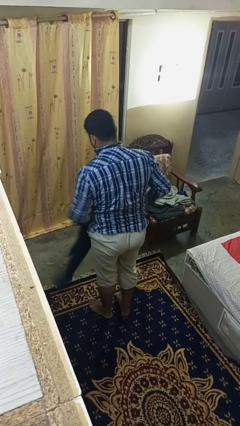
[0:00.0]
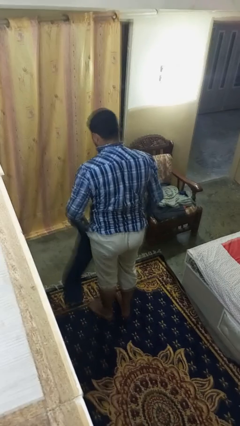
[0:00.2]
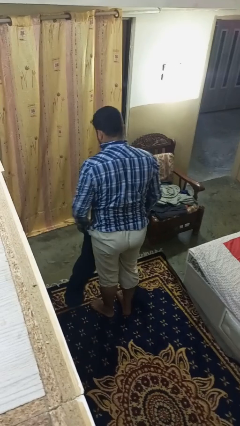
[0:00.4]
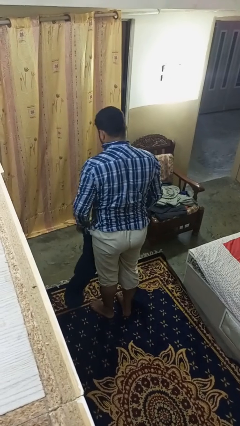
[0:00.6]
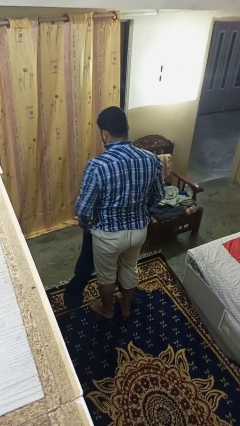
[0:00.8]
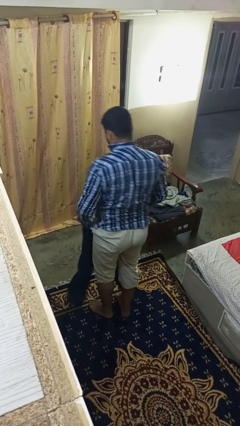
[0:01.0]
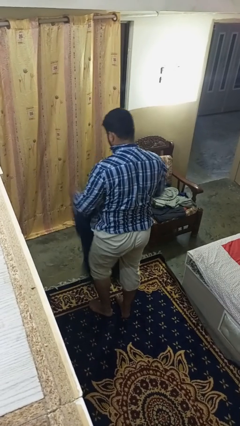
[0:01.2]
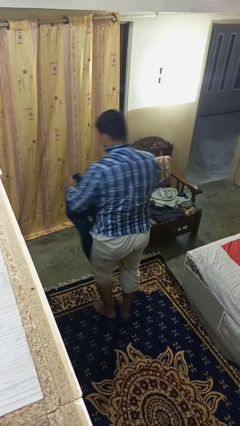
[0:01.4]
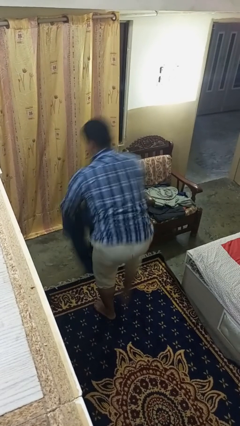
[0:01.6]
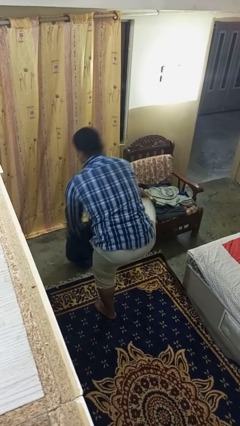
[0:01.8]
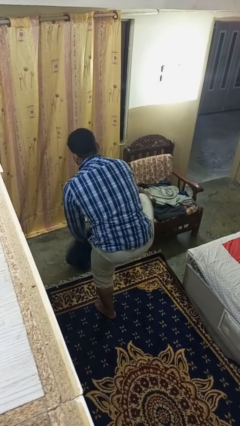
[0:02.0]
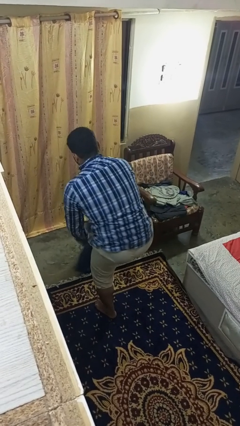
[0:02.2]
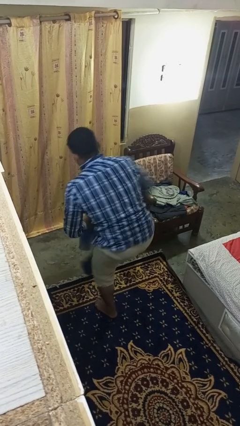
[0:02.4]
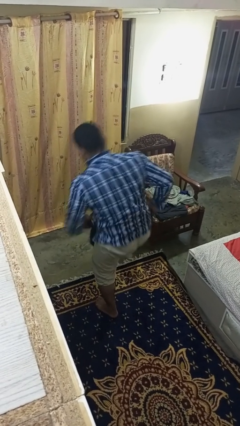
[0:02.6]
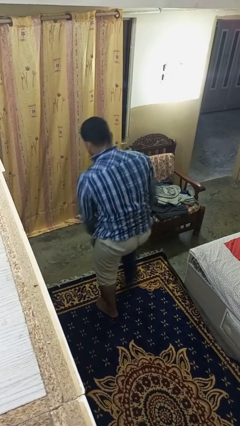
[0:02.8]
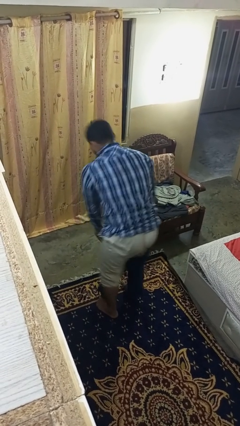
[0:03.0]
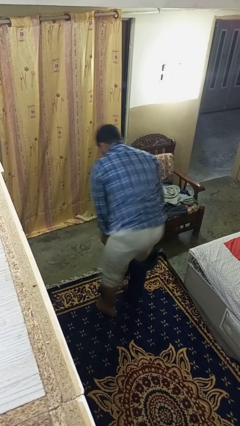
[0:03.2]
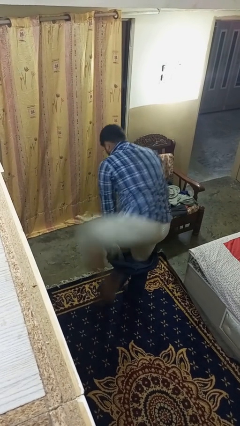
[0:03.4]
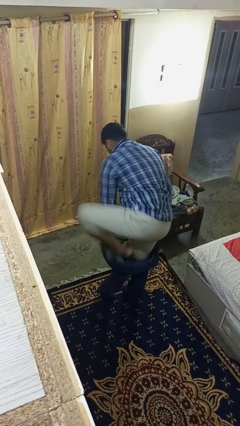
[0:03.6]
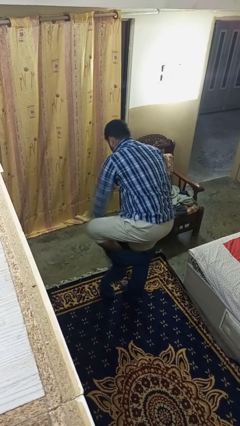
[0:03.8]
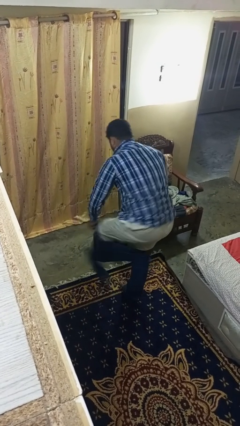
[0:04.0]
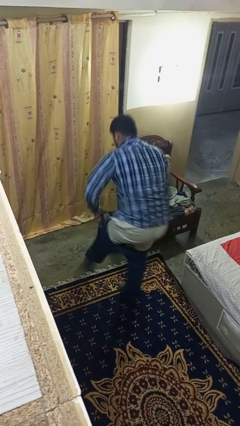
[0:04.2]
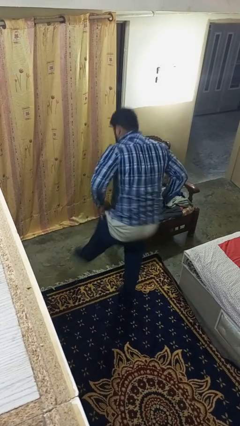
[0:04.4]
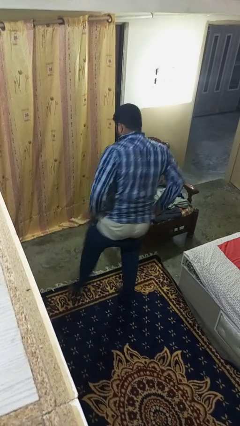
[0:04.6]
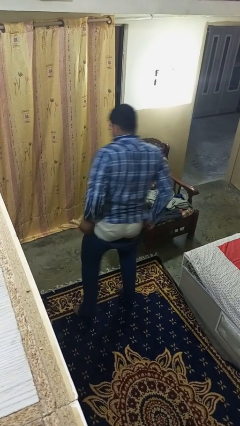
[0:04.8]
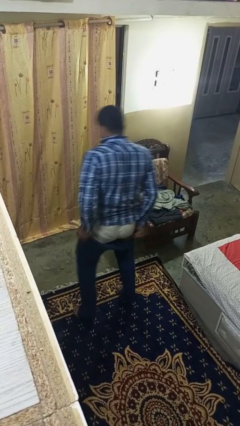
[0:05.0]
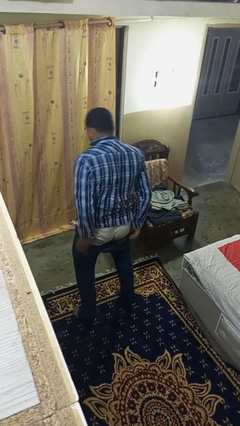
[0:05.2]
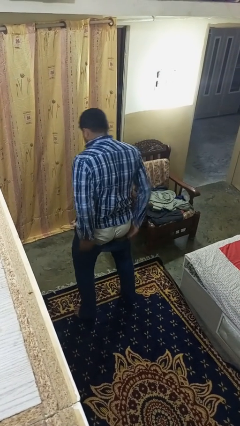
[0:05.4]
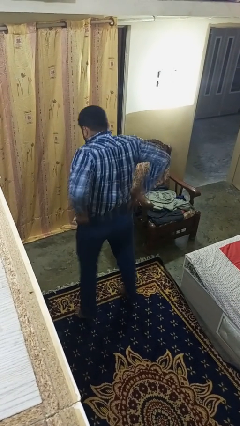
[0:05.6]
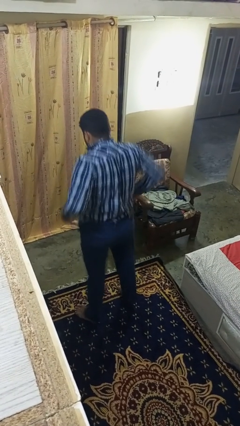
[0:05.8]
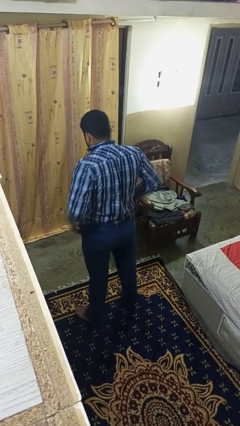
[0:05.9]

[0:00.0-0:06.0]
person puts on pants

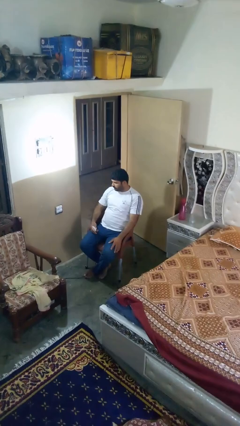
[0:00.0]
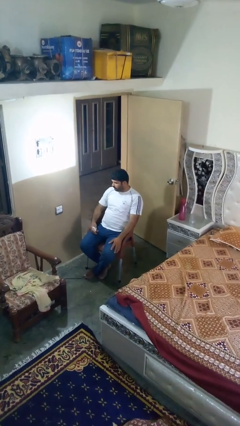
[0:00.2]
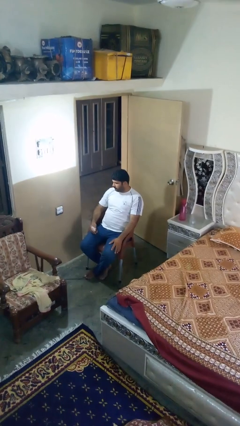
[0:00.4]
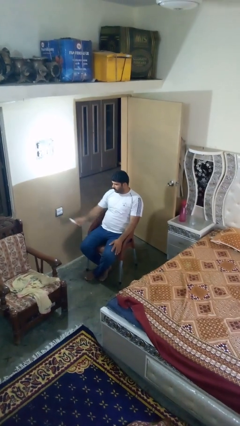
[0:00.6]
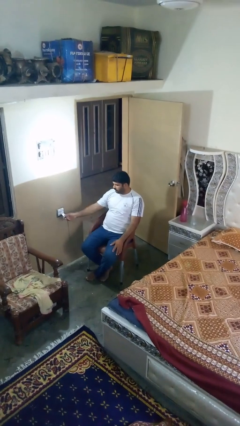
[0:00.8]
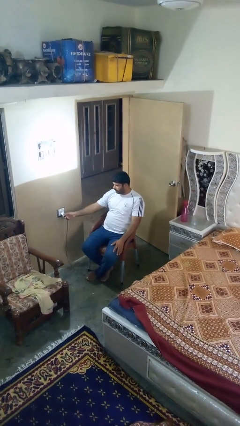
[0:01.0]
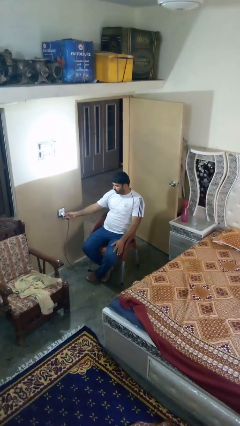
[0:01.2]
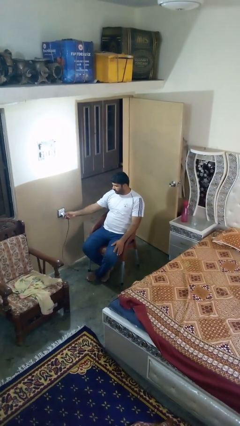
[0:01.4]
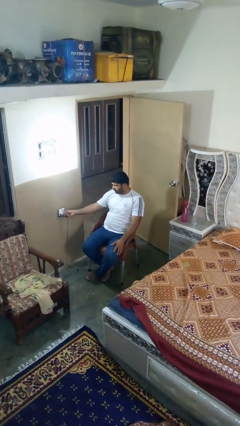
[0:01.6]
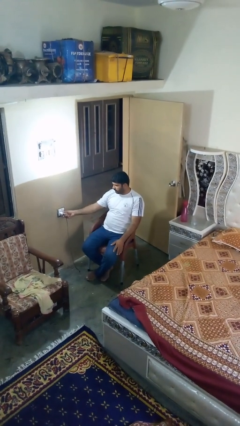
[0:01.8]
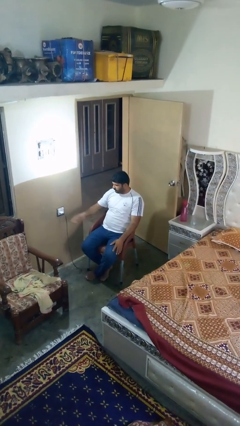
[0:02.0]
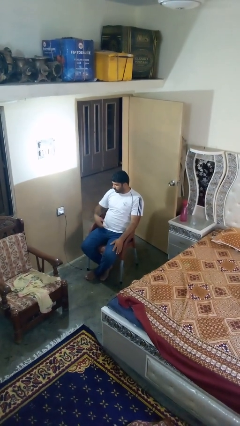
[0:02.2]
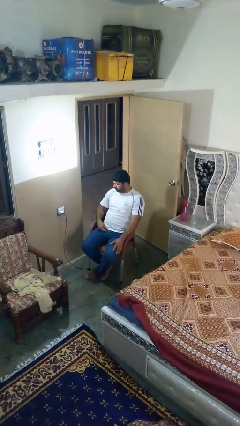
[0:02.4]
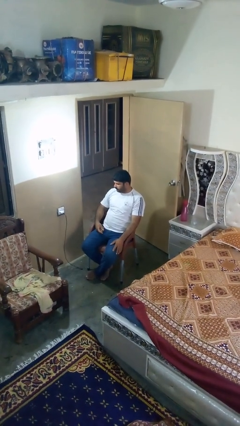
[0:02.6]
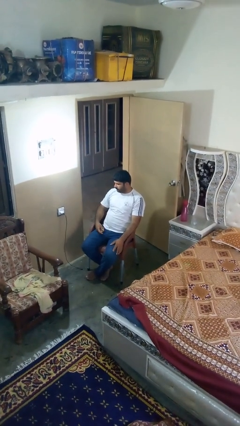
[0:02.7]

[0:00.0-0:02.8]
person plugs into electrical socket

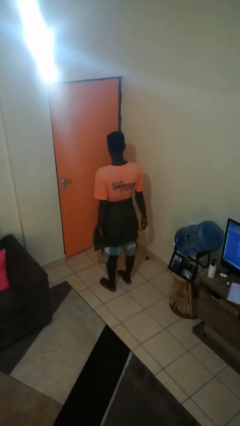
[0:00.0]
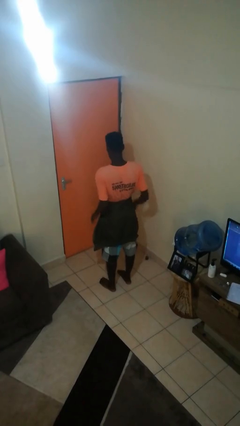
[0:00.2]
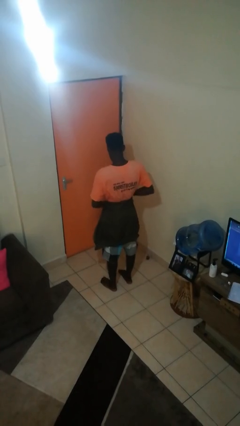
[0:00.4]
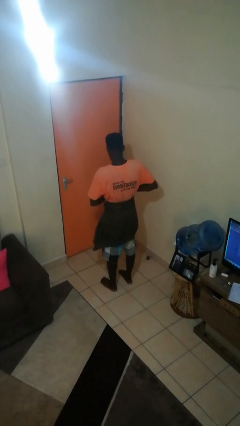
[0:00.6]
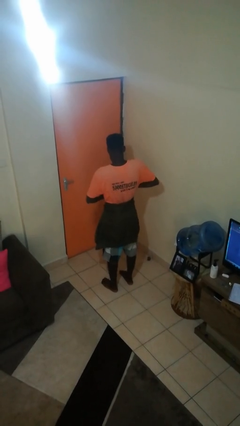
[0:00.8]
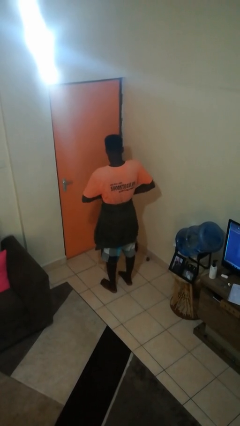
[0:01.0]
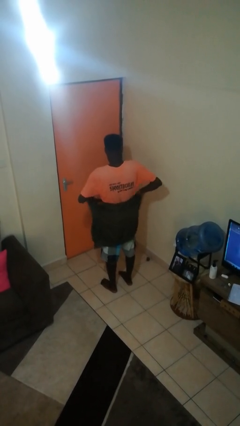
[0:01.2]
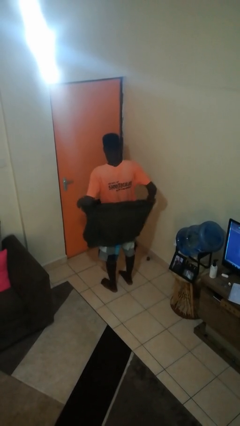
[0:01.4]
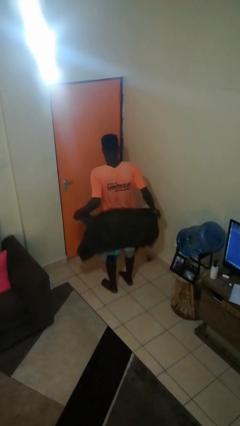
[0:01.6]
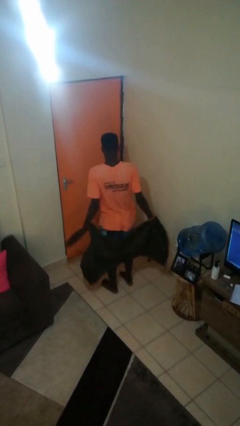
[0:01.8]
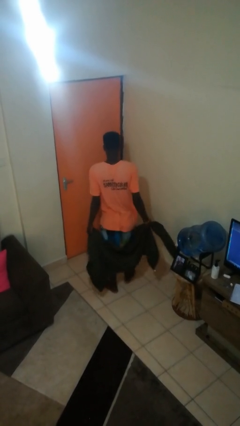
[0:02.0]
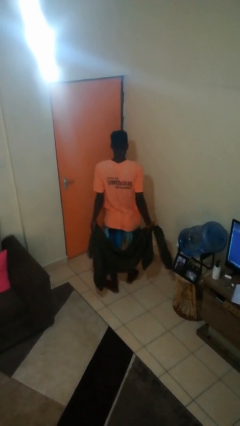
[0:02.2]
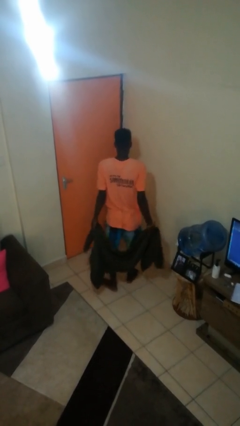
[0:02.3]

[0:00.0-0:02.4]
person unties jacket around waist

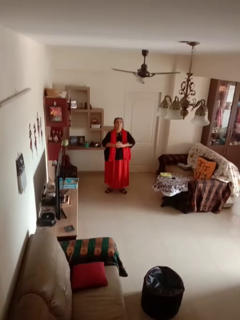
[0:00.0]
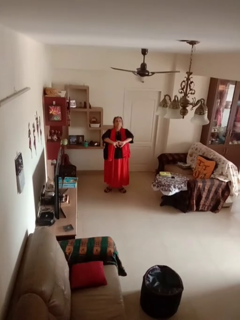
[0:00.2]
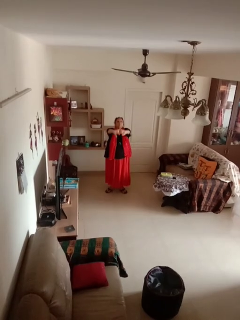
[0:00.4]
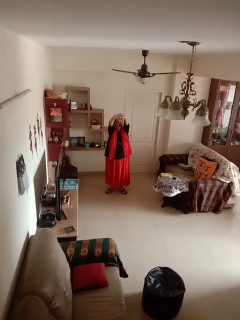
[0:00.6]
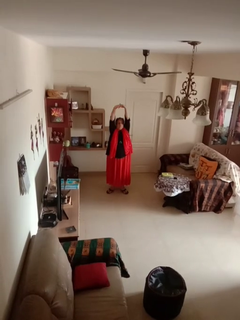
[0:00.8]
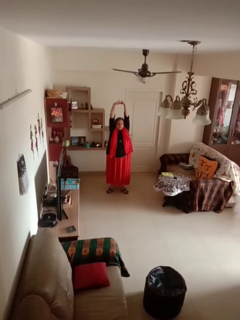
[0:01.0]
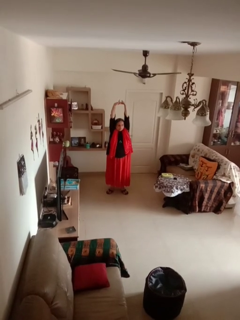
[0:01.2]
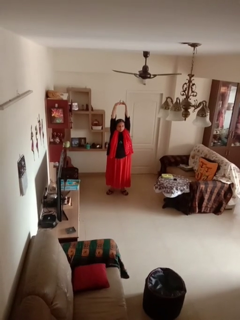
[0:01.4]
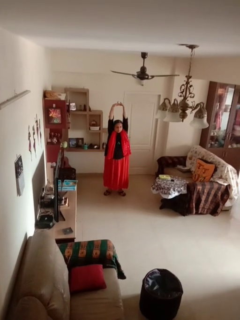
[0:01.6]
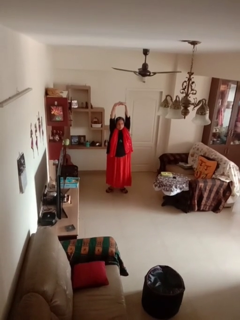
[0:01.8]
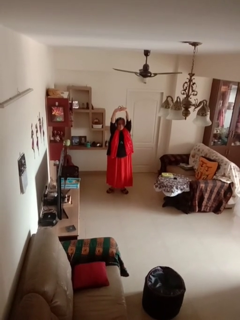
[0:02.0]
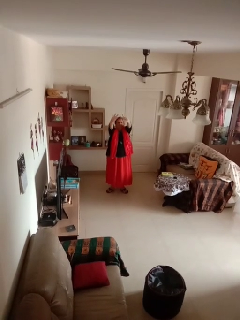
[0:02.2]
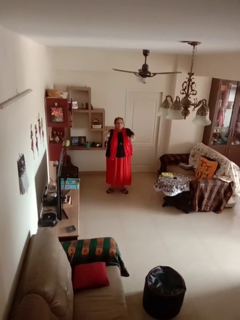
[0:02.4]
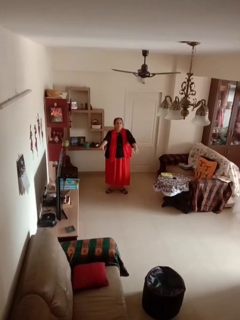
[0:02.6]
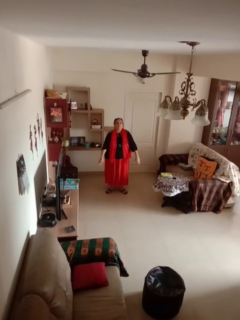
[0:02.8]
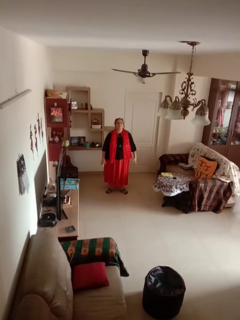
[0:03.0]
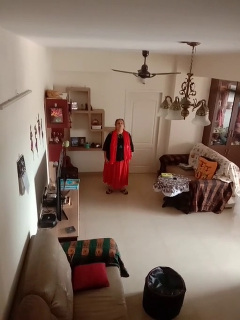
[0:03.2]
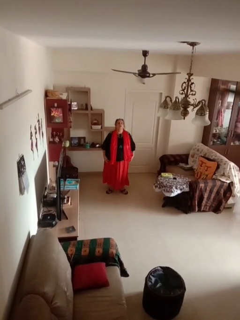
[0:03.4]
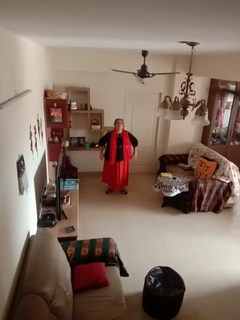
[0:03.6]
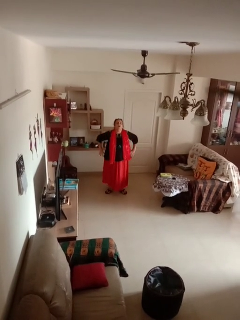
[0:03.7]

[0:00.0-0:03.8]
person stretches arms over head

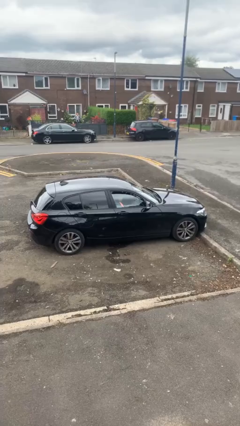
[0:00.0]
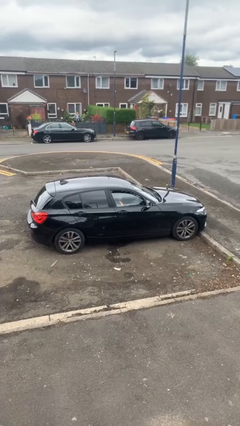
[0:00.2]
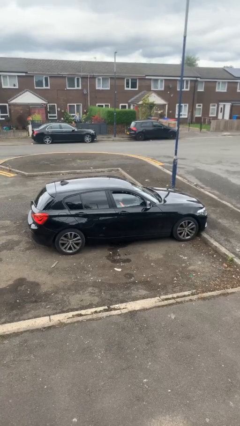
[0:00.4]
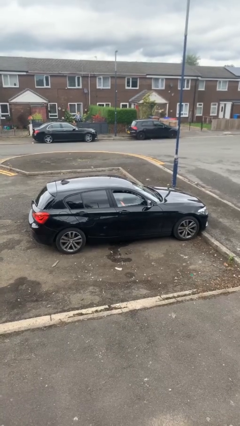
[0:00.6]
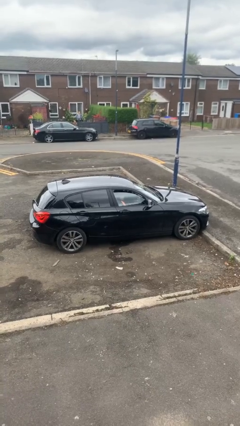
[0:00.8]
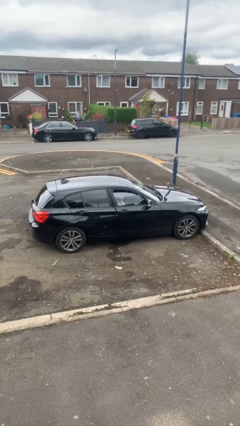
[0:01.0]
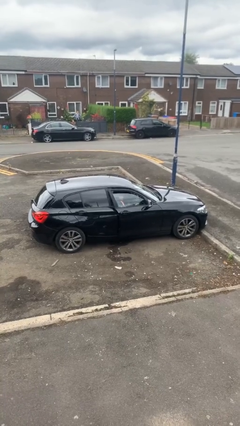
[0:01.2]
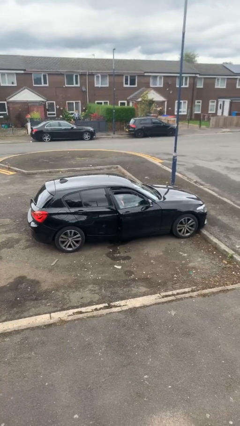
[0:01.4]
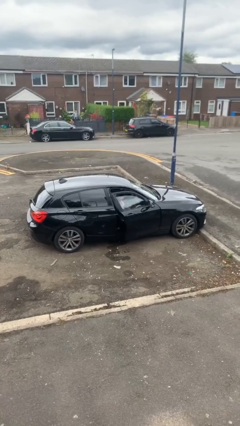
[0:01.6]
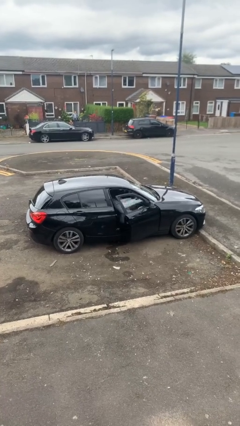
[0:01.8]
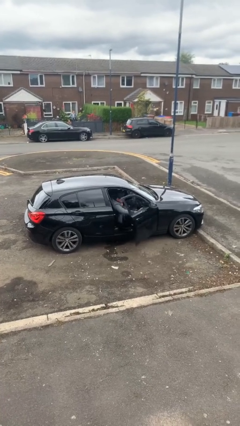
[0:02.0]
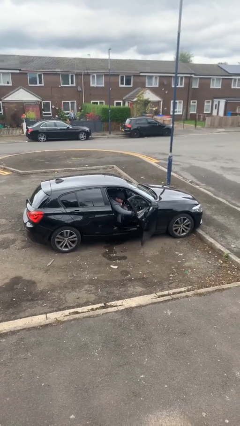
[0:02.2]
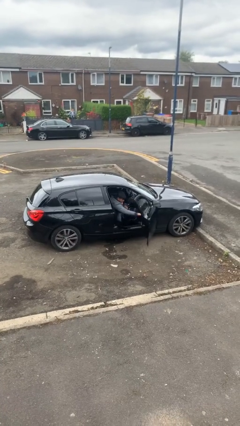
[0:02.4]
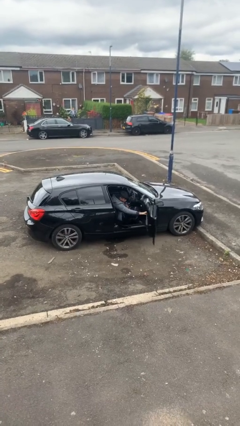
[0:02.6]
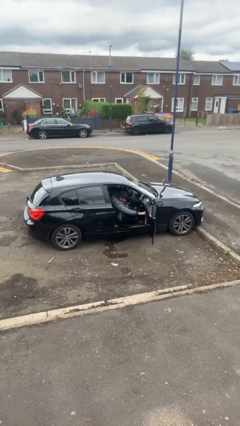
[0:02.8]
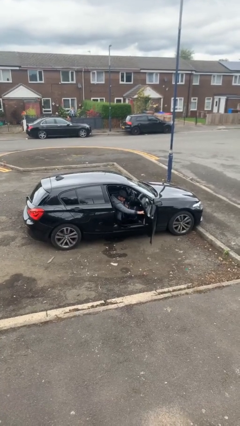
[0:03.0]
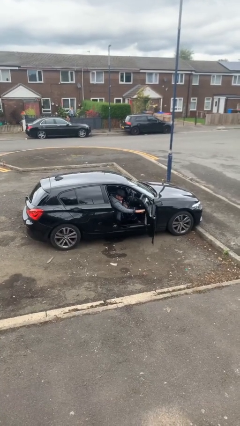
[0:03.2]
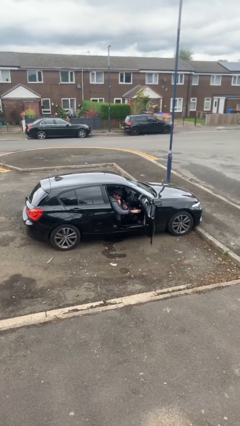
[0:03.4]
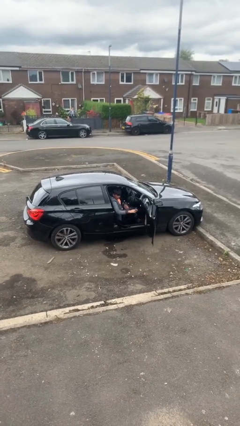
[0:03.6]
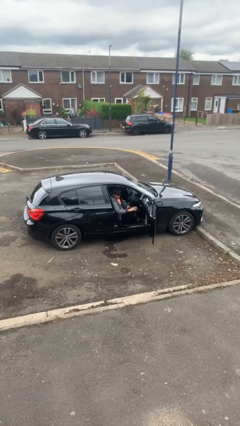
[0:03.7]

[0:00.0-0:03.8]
person opens car door
